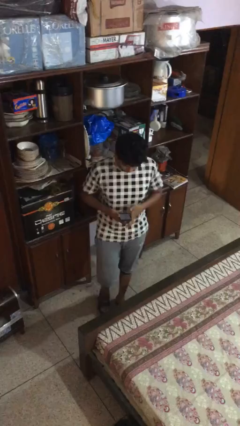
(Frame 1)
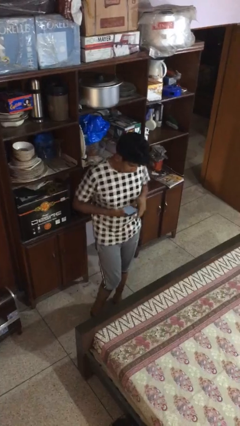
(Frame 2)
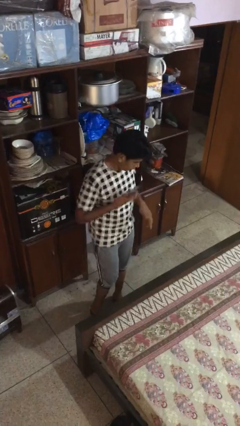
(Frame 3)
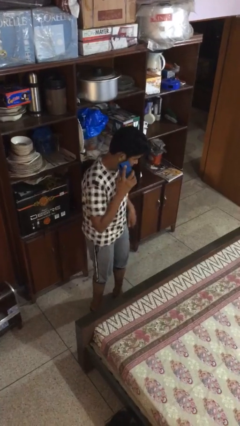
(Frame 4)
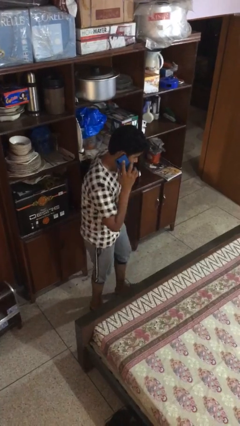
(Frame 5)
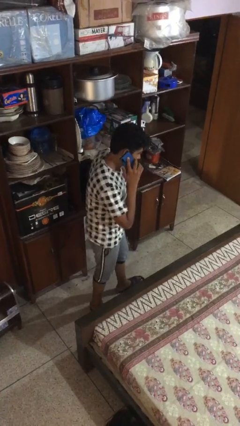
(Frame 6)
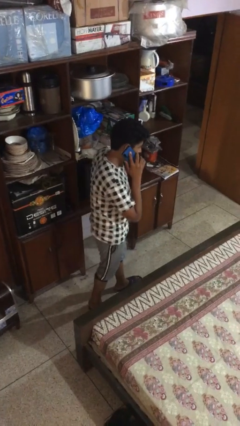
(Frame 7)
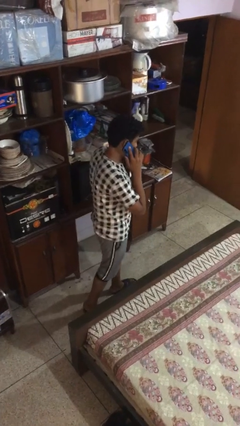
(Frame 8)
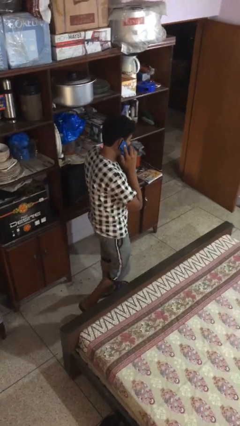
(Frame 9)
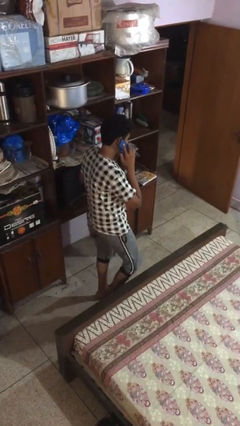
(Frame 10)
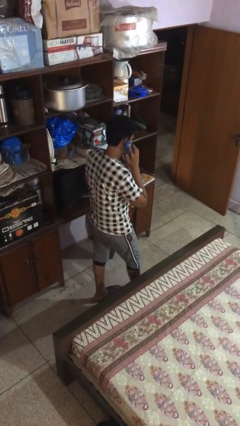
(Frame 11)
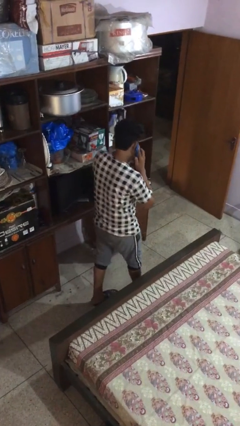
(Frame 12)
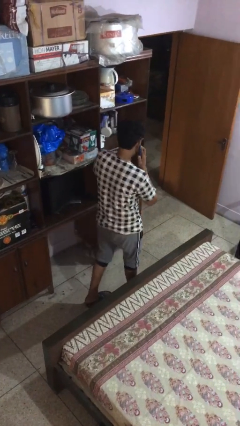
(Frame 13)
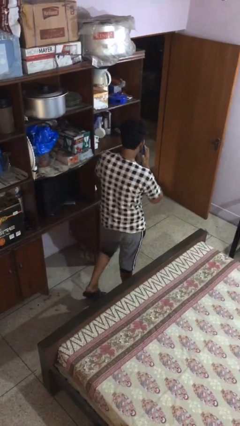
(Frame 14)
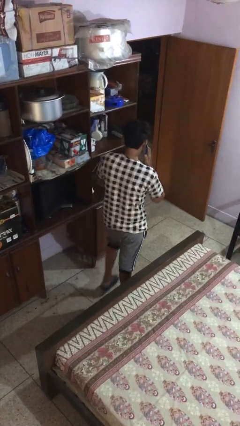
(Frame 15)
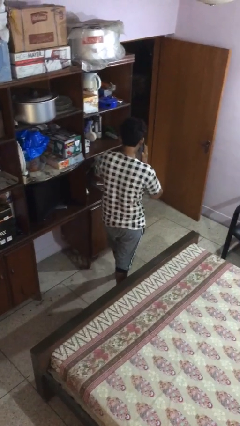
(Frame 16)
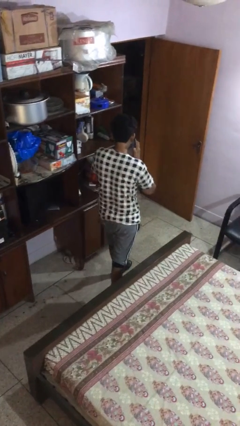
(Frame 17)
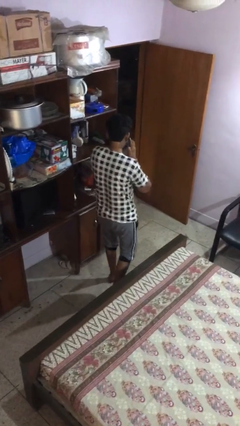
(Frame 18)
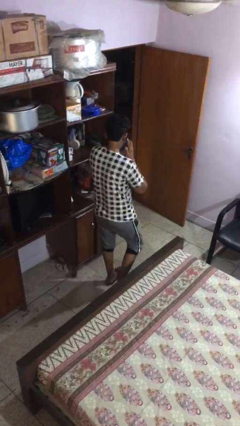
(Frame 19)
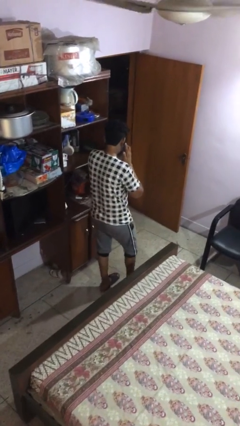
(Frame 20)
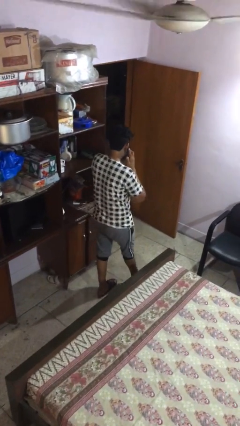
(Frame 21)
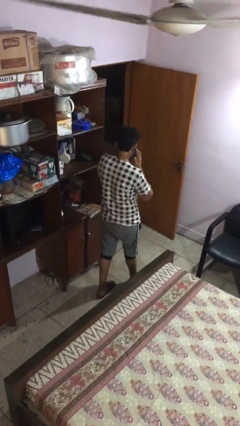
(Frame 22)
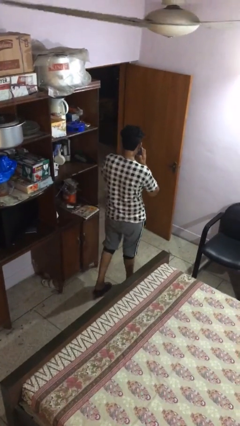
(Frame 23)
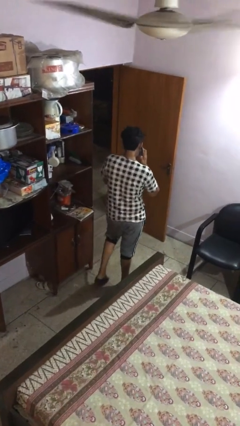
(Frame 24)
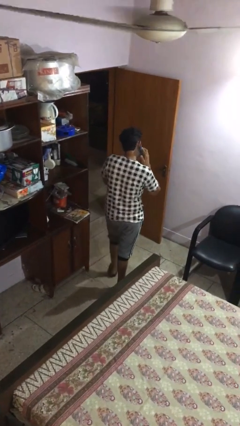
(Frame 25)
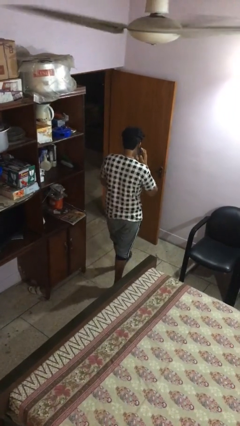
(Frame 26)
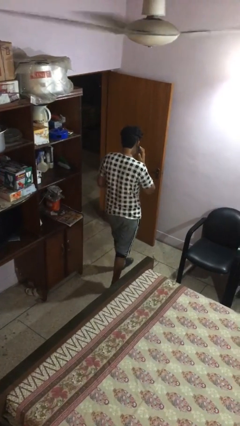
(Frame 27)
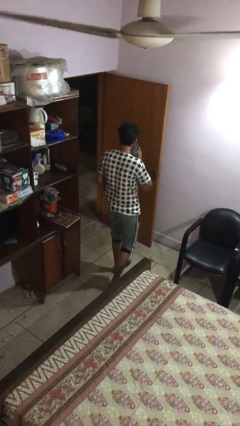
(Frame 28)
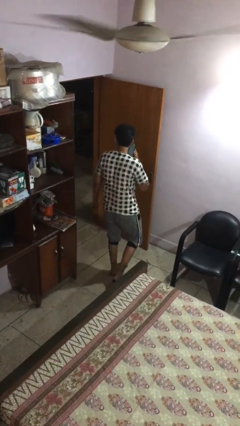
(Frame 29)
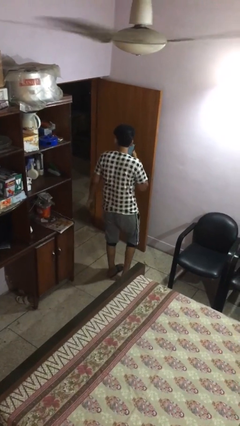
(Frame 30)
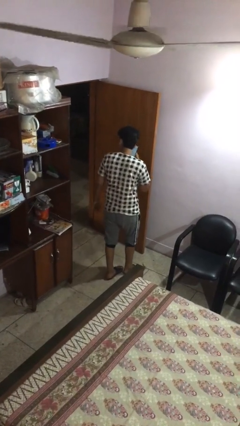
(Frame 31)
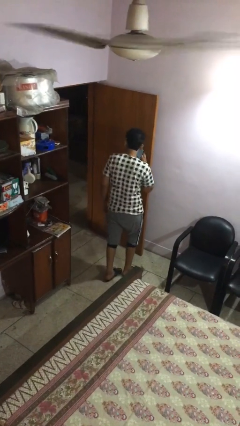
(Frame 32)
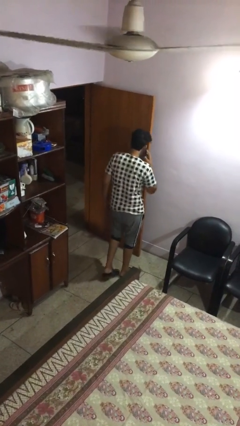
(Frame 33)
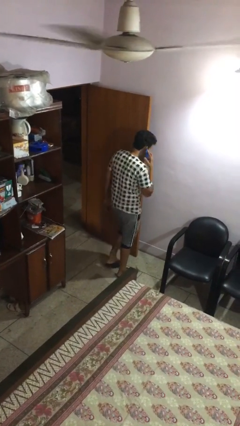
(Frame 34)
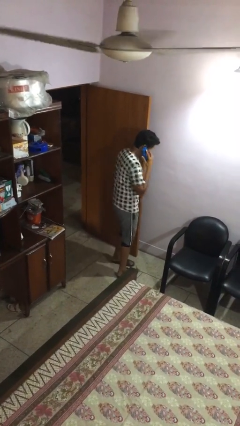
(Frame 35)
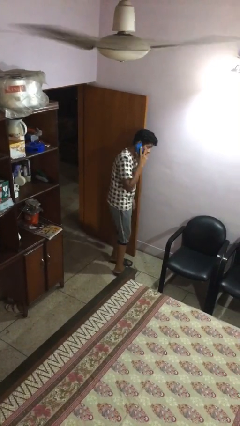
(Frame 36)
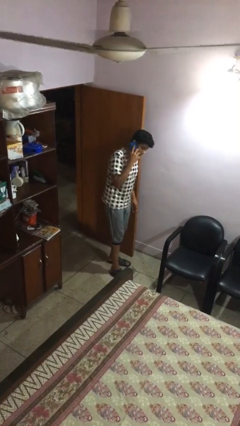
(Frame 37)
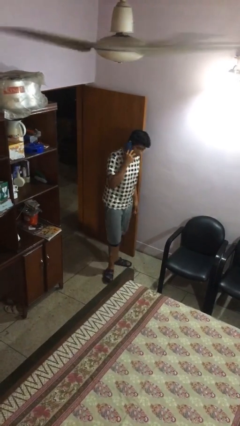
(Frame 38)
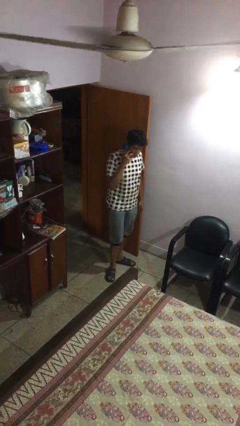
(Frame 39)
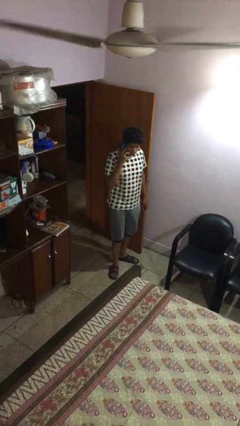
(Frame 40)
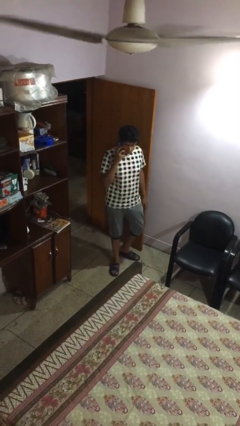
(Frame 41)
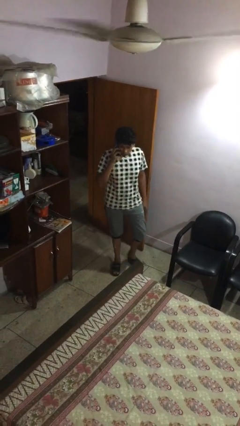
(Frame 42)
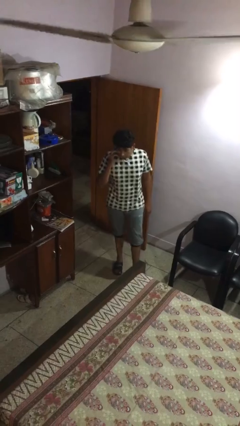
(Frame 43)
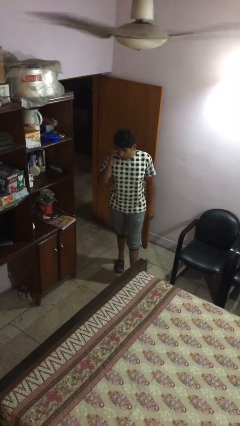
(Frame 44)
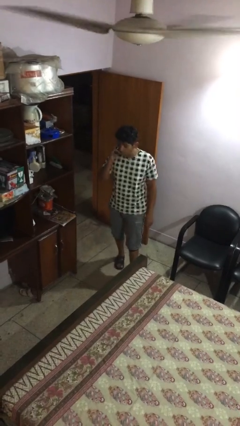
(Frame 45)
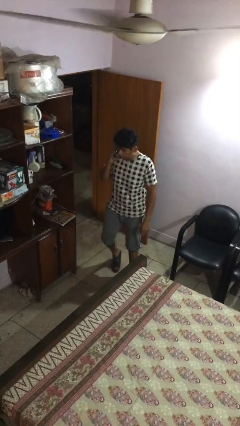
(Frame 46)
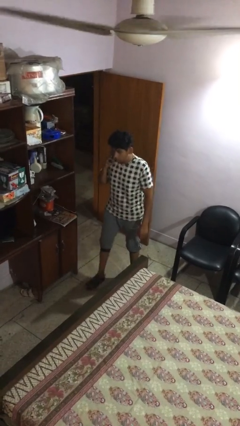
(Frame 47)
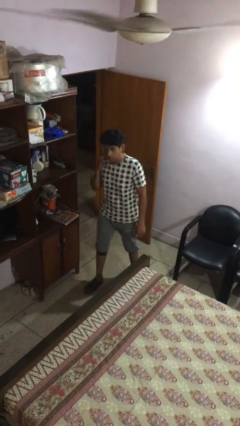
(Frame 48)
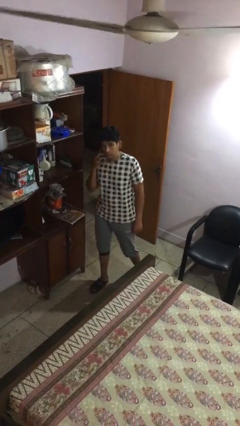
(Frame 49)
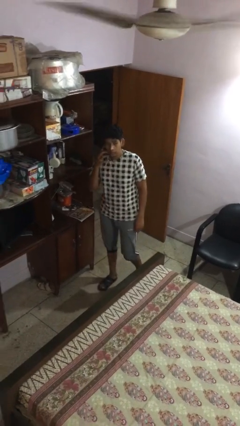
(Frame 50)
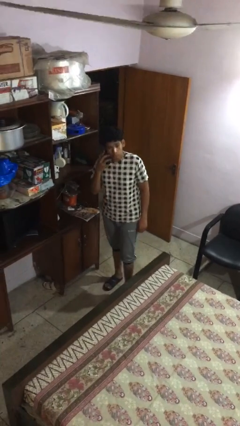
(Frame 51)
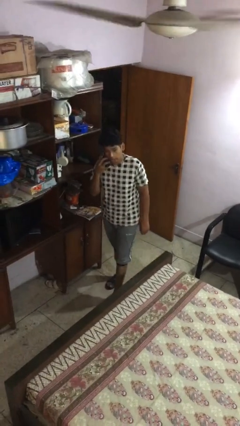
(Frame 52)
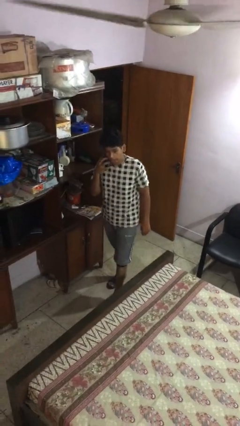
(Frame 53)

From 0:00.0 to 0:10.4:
person talks on phone

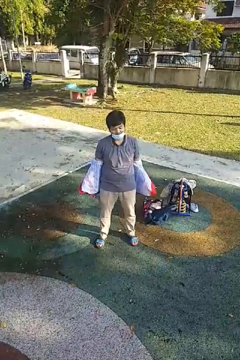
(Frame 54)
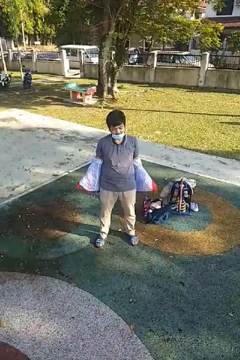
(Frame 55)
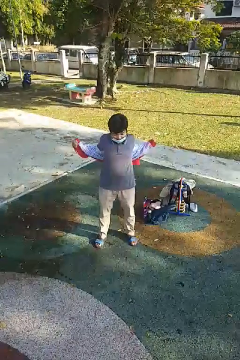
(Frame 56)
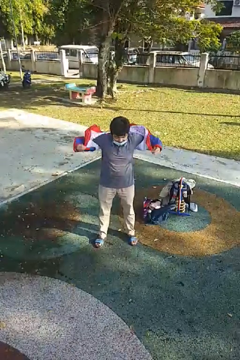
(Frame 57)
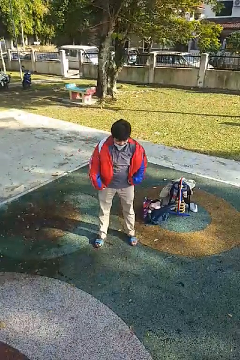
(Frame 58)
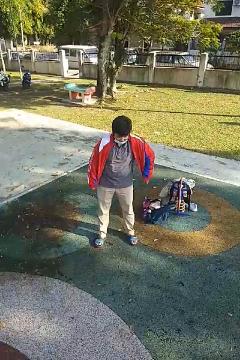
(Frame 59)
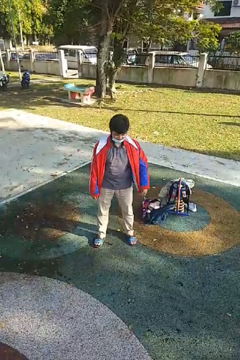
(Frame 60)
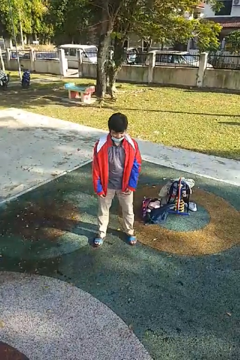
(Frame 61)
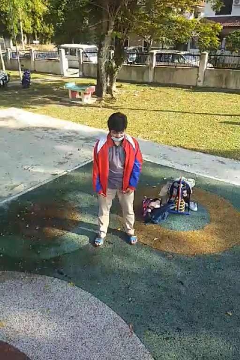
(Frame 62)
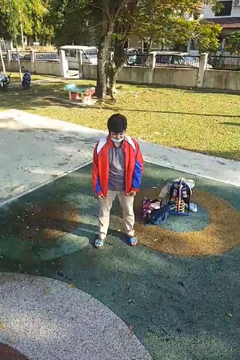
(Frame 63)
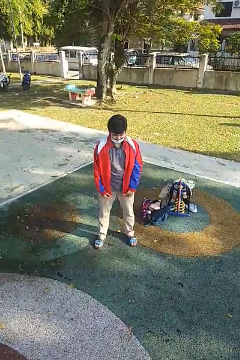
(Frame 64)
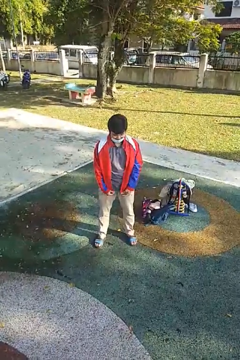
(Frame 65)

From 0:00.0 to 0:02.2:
person puts on jacket

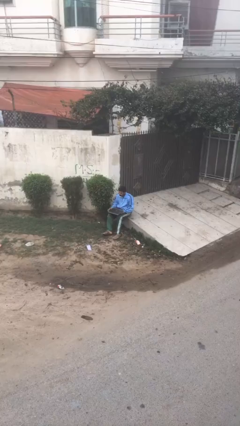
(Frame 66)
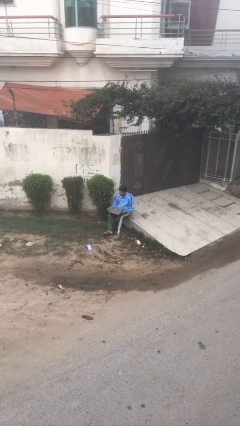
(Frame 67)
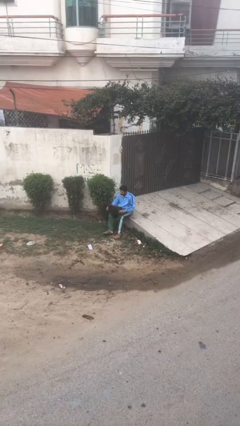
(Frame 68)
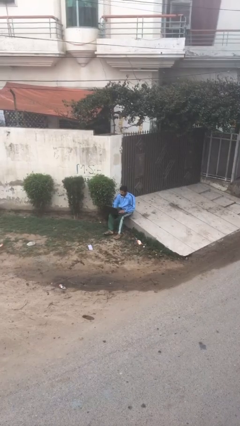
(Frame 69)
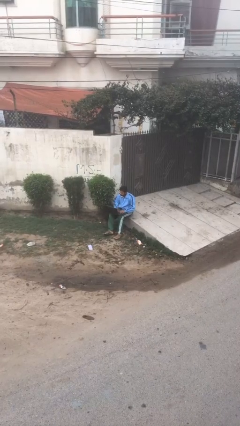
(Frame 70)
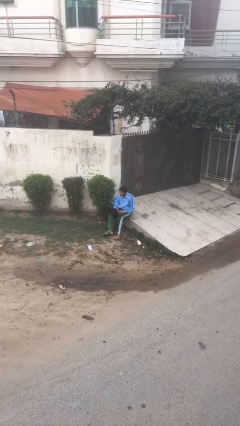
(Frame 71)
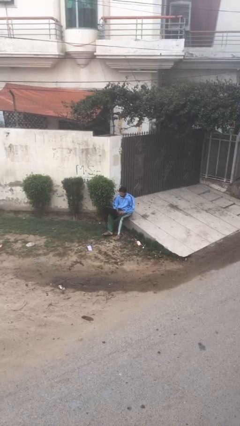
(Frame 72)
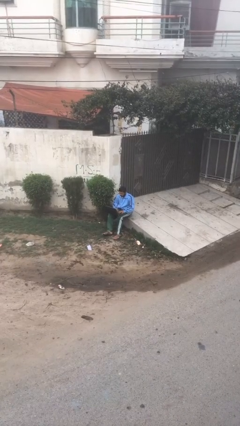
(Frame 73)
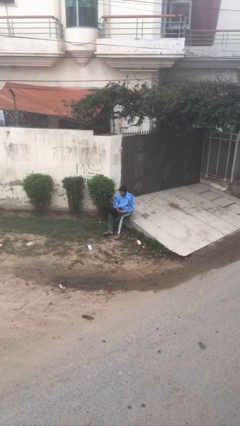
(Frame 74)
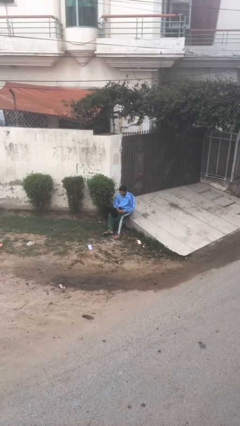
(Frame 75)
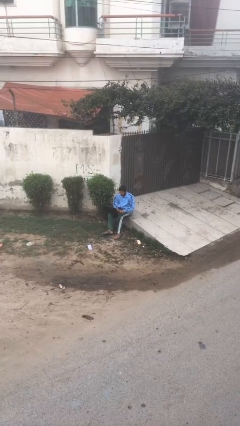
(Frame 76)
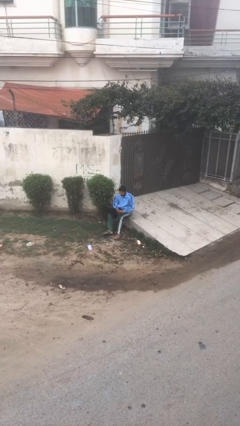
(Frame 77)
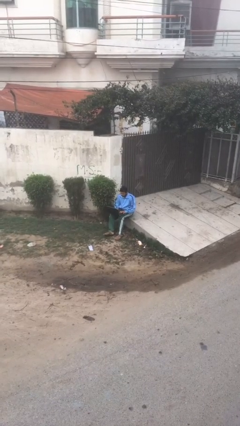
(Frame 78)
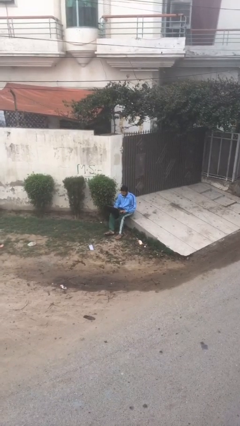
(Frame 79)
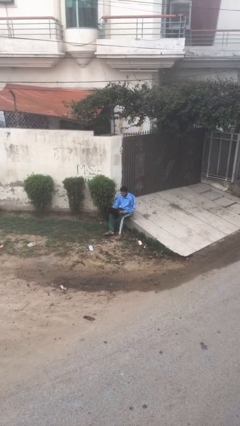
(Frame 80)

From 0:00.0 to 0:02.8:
person interacts with laptop

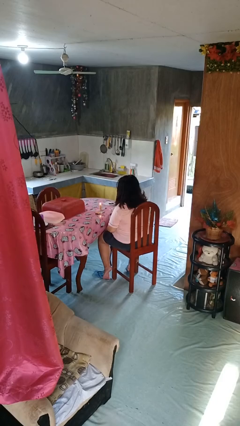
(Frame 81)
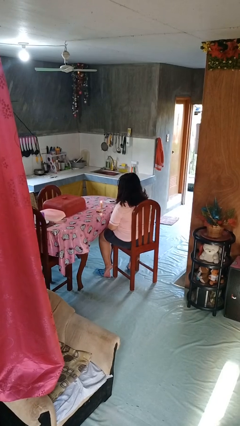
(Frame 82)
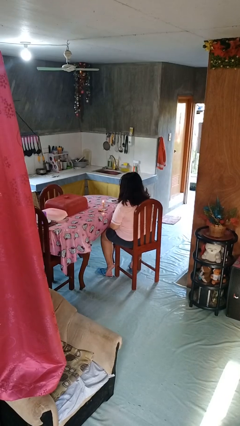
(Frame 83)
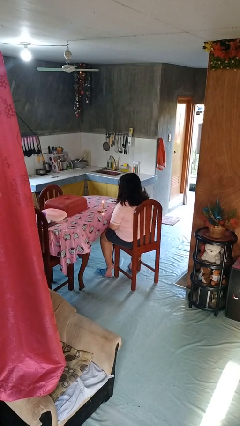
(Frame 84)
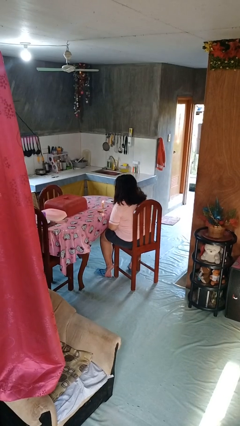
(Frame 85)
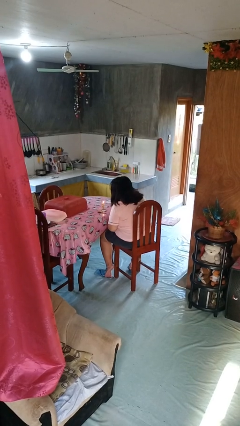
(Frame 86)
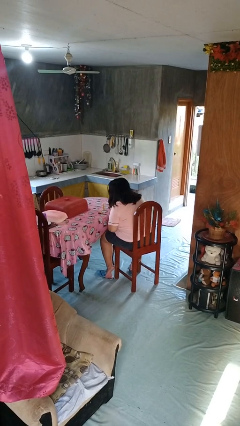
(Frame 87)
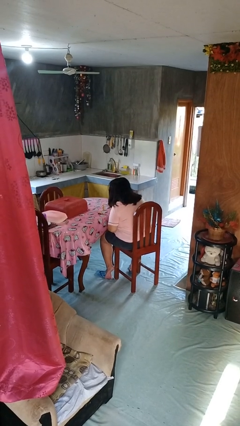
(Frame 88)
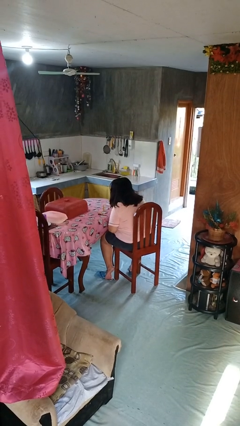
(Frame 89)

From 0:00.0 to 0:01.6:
person extinguishes candle

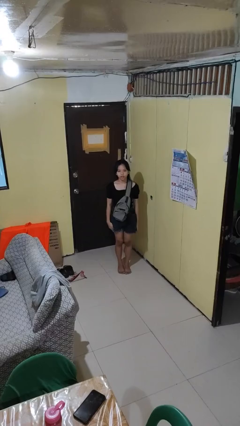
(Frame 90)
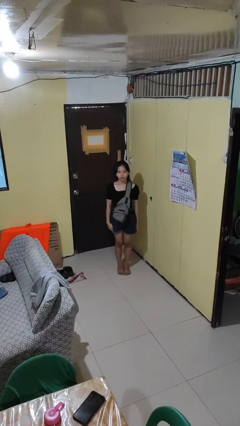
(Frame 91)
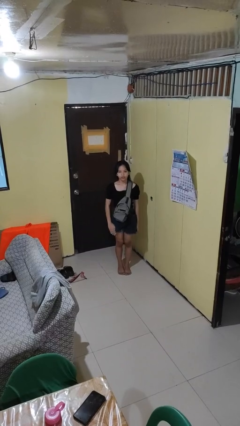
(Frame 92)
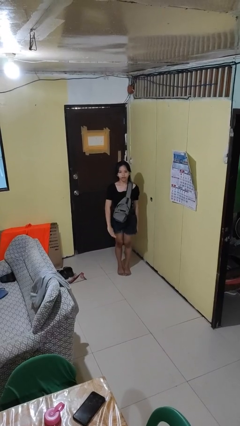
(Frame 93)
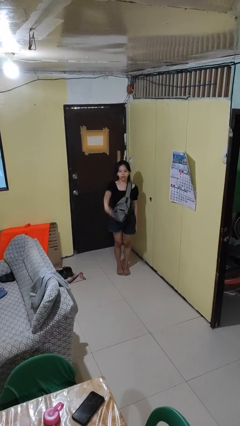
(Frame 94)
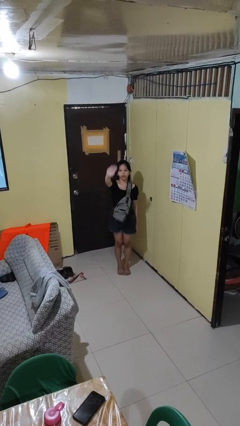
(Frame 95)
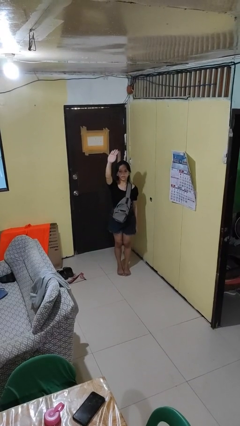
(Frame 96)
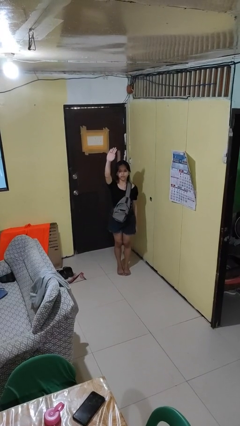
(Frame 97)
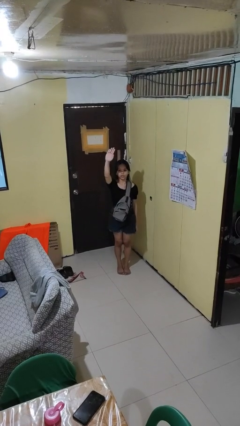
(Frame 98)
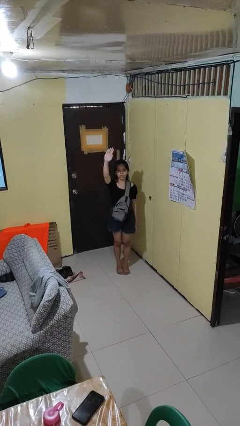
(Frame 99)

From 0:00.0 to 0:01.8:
person gestures swipe up
